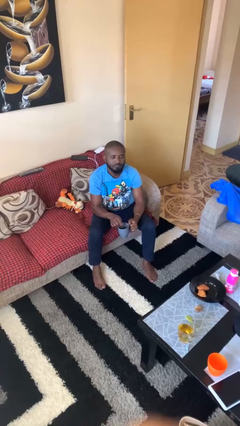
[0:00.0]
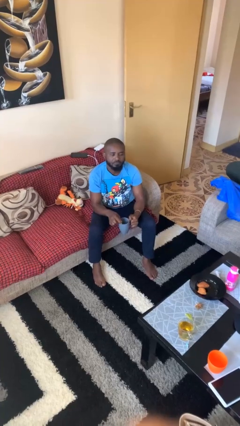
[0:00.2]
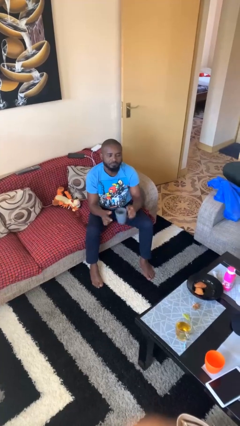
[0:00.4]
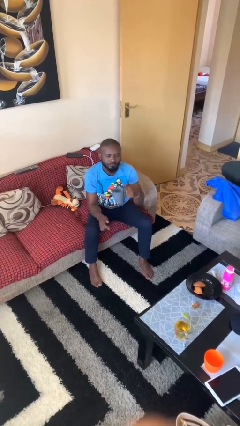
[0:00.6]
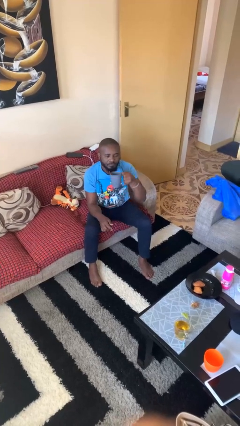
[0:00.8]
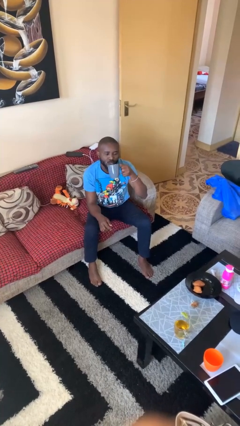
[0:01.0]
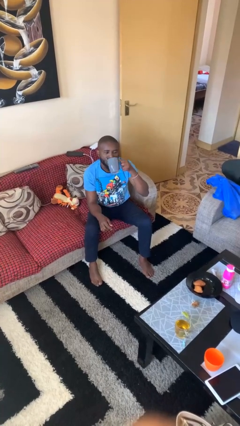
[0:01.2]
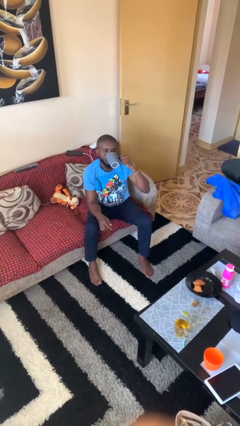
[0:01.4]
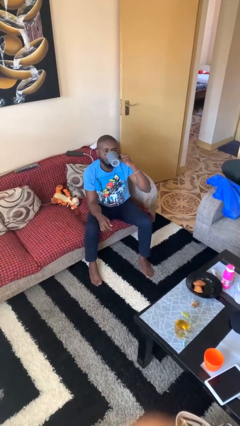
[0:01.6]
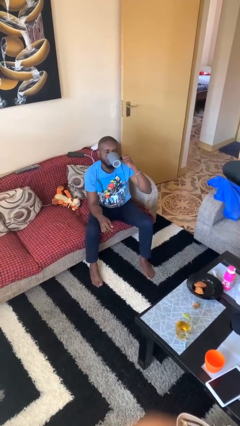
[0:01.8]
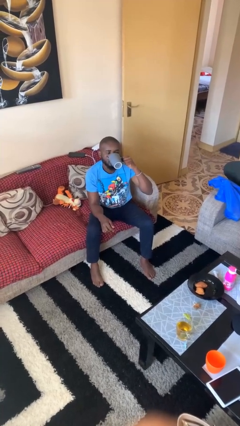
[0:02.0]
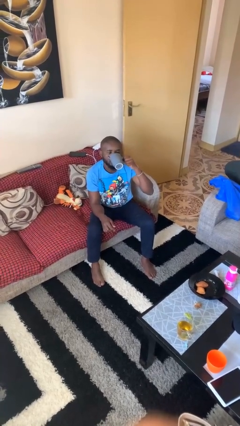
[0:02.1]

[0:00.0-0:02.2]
person drinks from mug

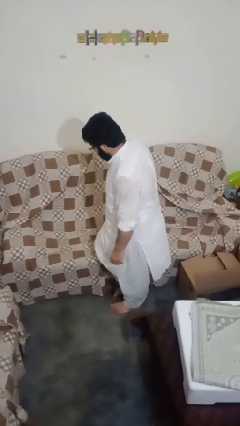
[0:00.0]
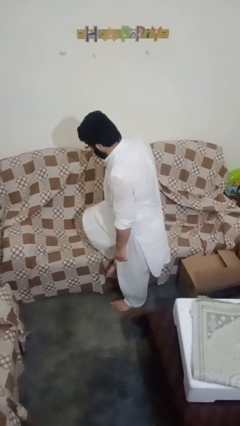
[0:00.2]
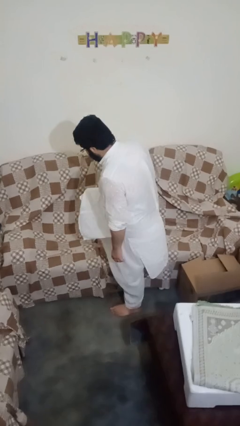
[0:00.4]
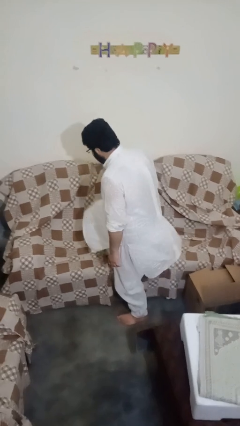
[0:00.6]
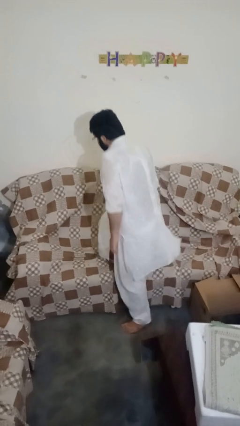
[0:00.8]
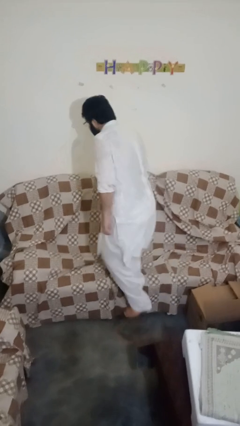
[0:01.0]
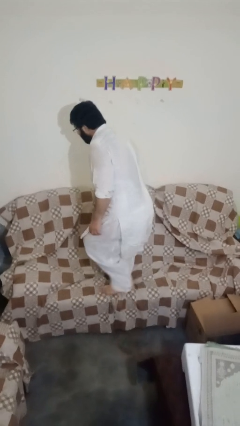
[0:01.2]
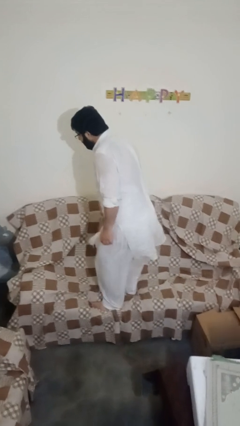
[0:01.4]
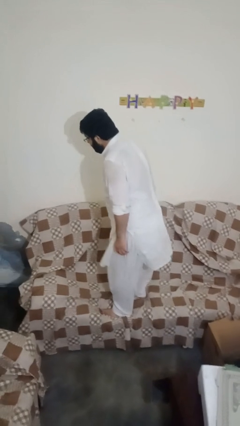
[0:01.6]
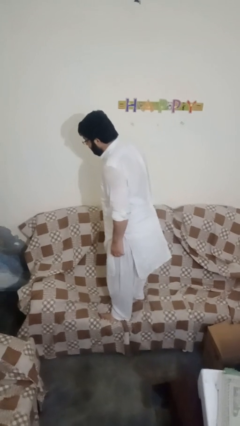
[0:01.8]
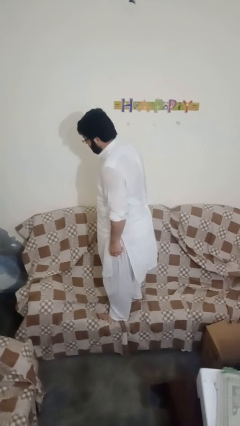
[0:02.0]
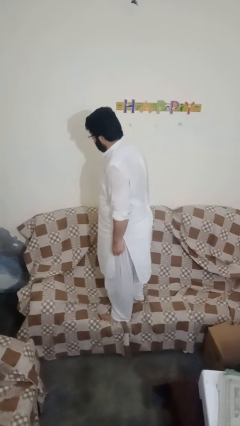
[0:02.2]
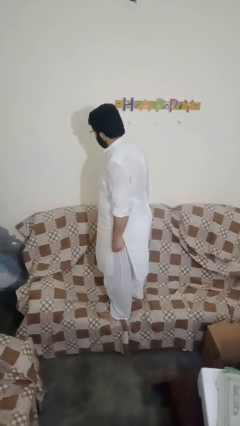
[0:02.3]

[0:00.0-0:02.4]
person climbs on couch

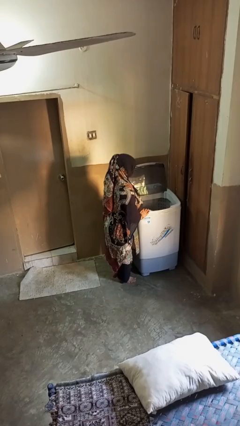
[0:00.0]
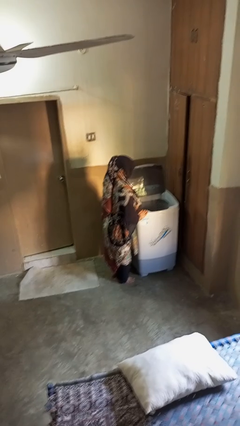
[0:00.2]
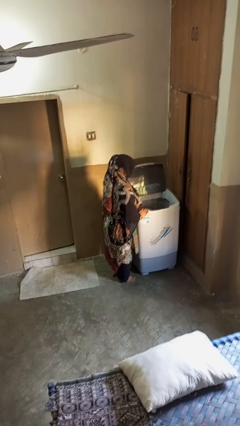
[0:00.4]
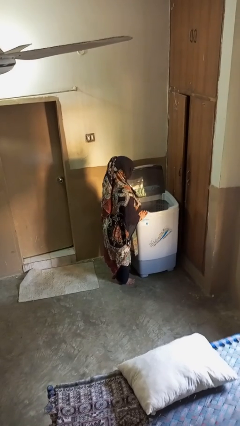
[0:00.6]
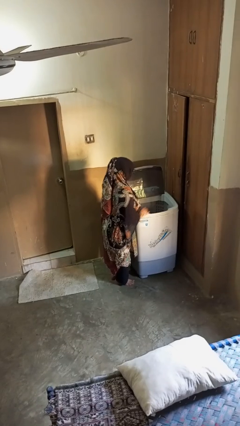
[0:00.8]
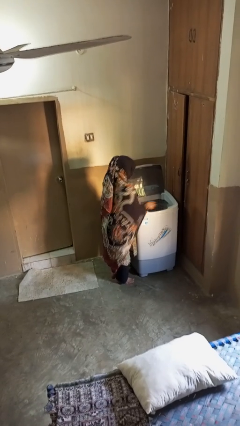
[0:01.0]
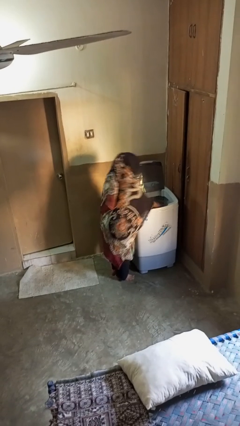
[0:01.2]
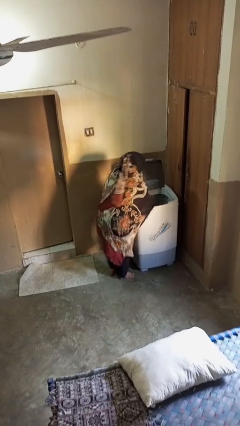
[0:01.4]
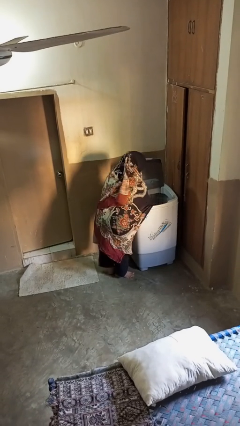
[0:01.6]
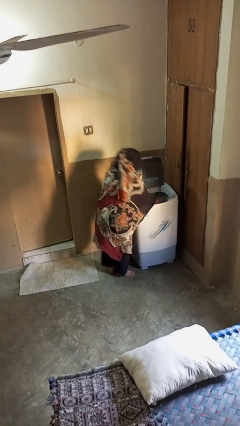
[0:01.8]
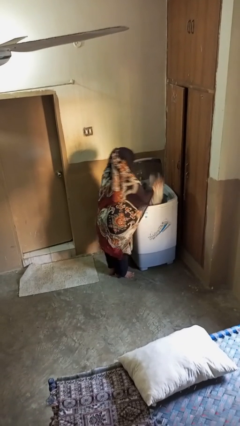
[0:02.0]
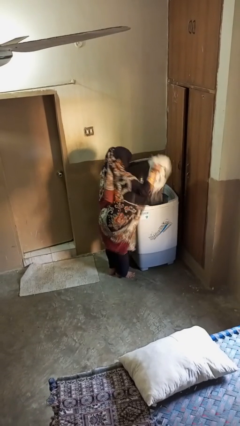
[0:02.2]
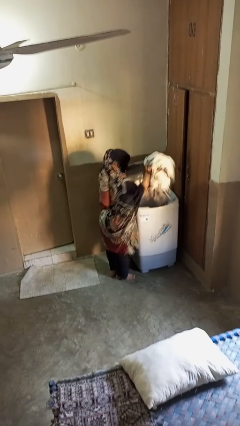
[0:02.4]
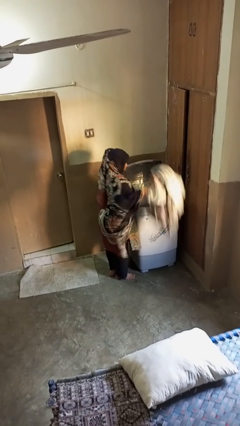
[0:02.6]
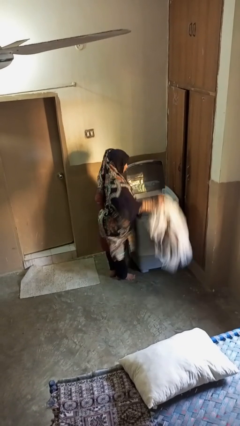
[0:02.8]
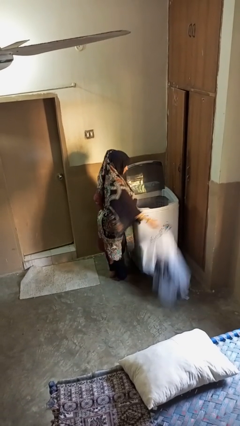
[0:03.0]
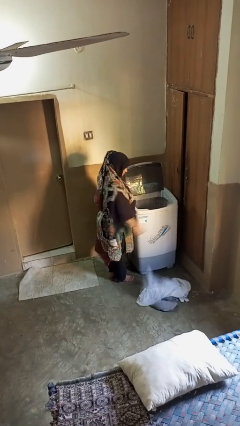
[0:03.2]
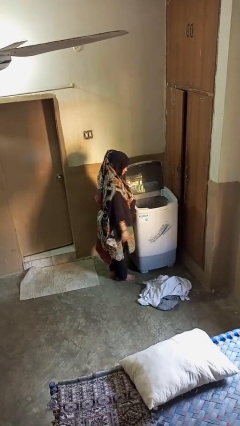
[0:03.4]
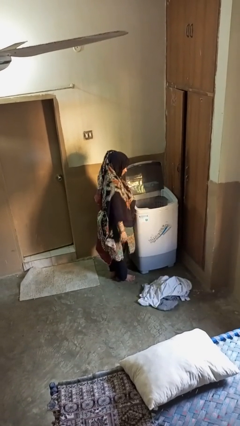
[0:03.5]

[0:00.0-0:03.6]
person unloads clotheswasher

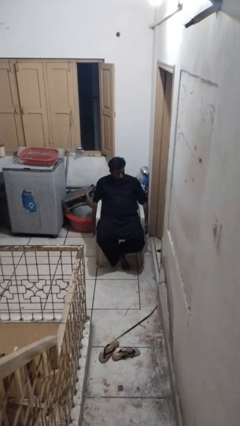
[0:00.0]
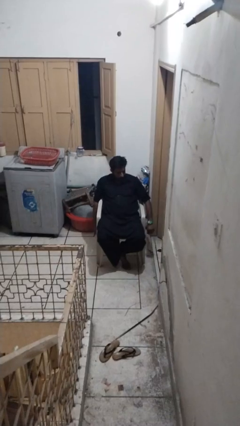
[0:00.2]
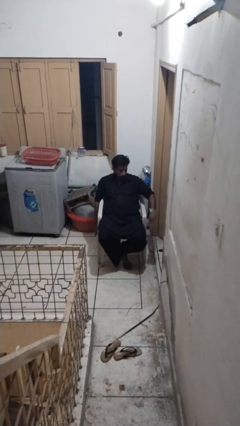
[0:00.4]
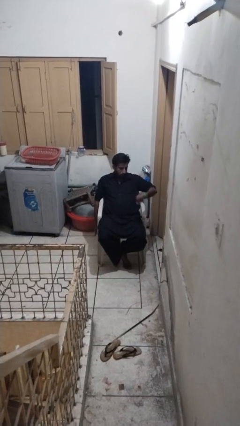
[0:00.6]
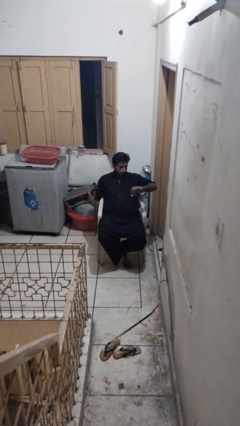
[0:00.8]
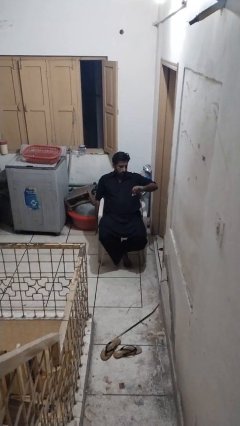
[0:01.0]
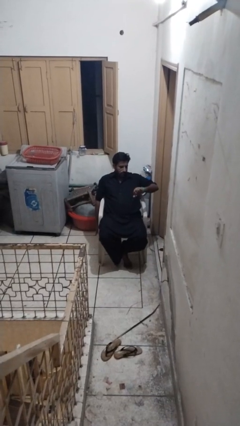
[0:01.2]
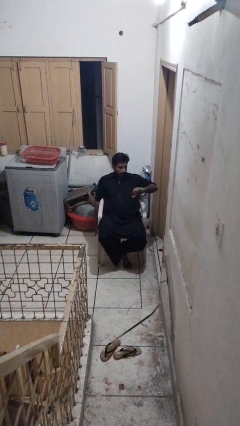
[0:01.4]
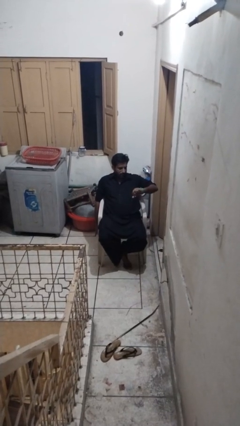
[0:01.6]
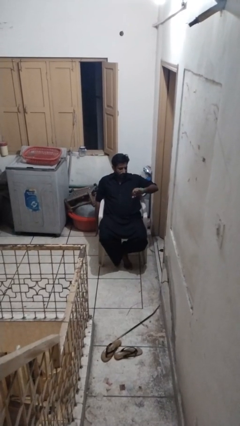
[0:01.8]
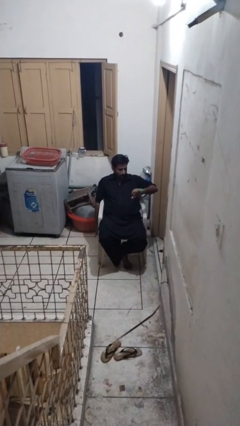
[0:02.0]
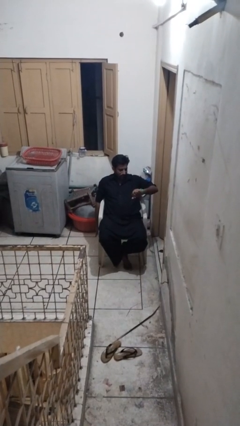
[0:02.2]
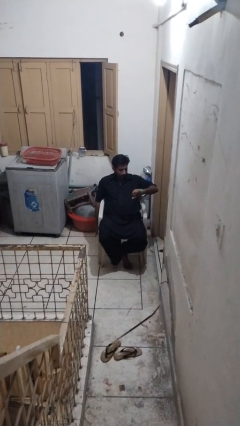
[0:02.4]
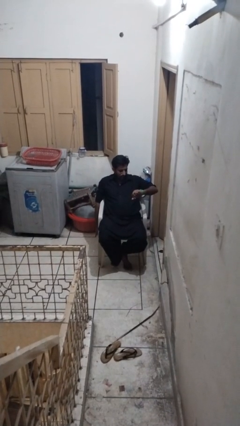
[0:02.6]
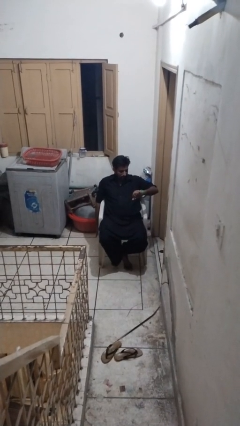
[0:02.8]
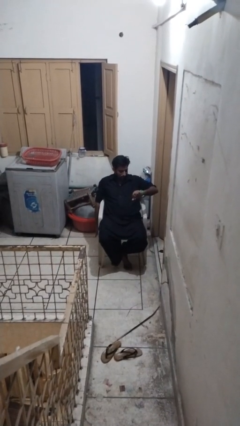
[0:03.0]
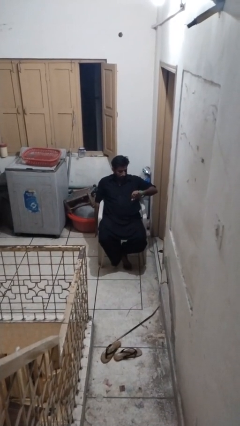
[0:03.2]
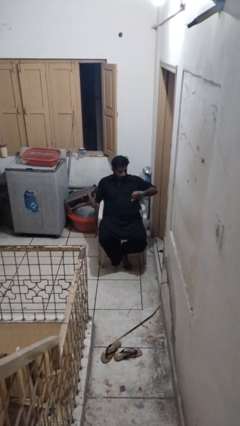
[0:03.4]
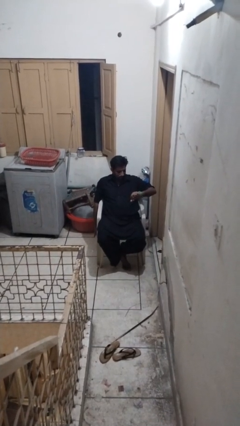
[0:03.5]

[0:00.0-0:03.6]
person looks at wristwatch

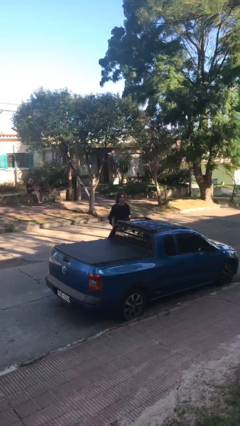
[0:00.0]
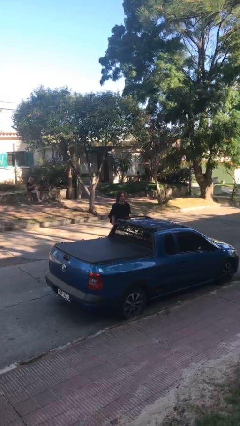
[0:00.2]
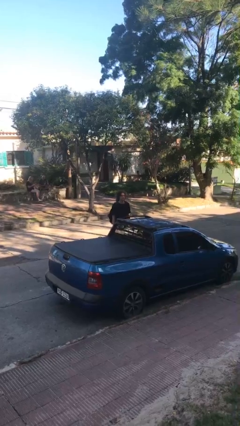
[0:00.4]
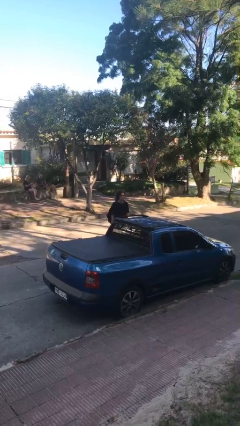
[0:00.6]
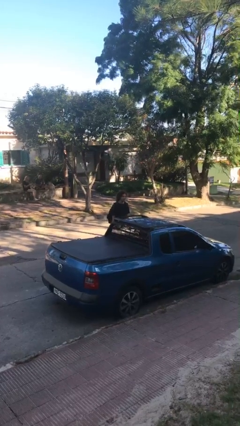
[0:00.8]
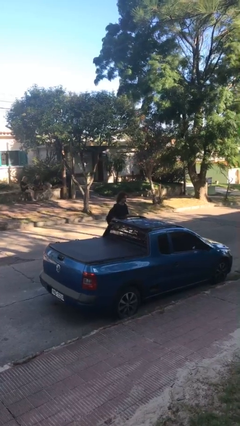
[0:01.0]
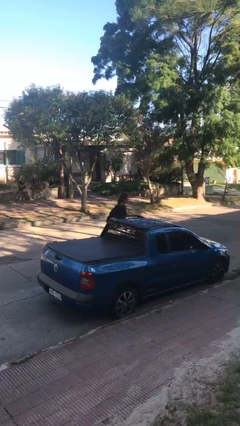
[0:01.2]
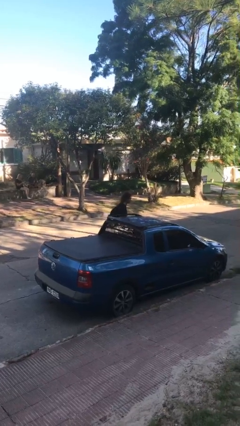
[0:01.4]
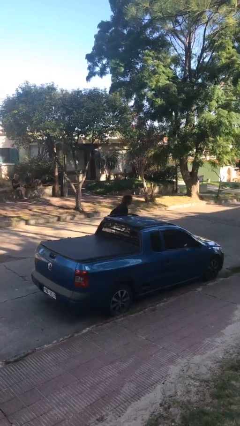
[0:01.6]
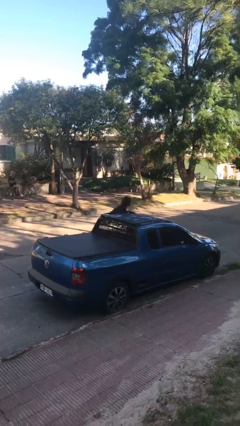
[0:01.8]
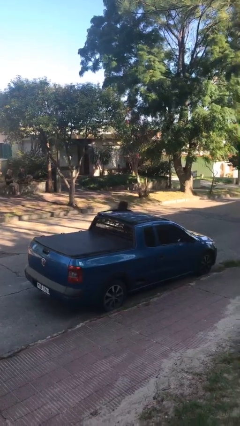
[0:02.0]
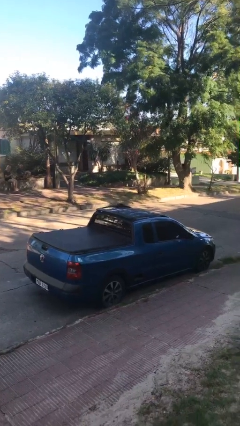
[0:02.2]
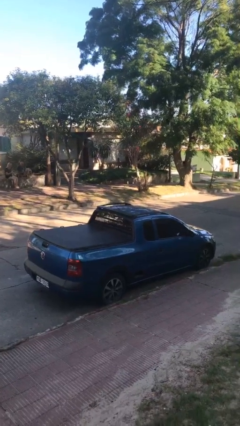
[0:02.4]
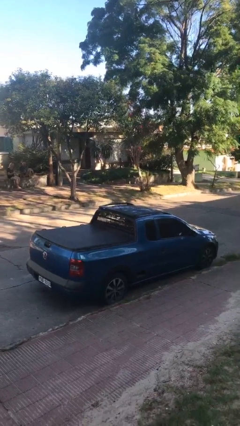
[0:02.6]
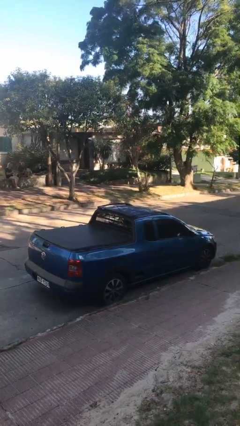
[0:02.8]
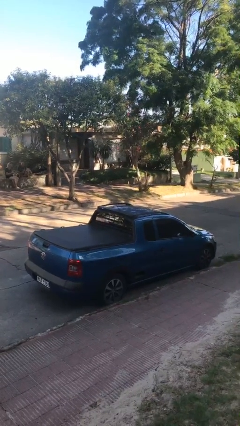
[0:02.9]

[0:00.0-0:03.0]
person enters car

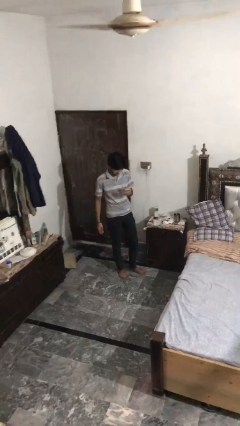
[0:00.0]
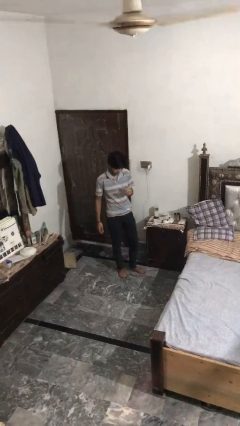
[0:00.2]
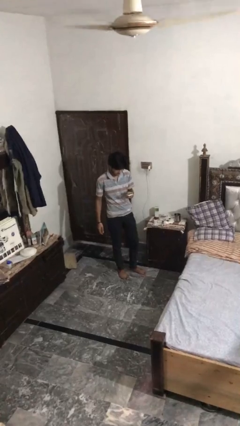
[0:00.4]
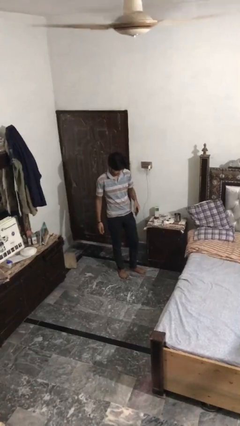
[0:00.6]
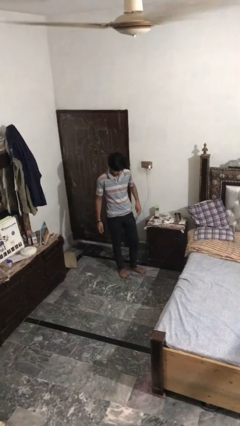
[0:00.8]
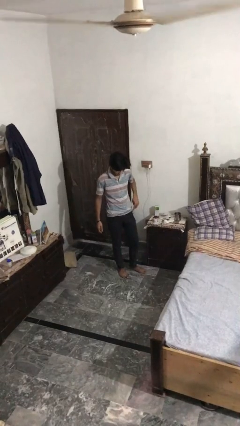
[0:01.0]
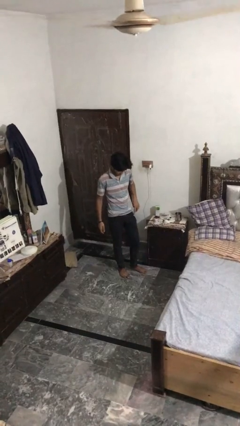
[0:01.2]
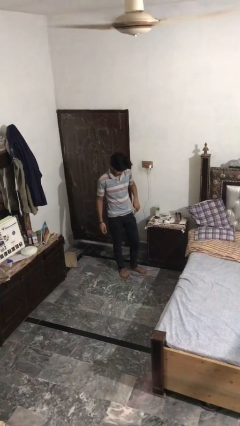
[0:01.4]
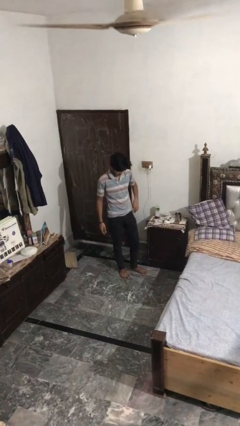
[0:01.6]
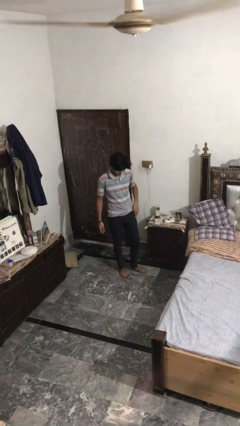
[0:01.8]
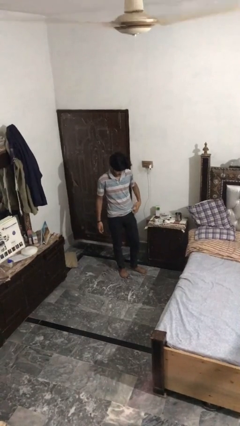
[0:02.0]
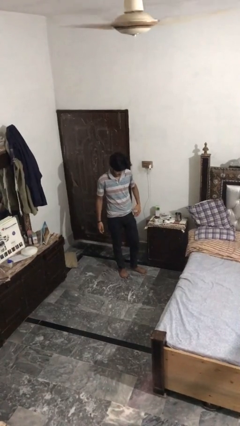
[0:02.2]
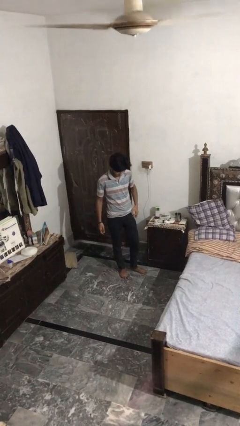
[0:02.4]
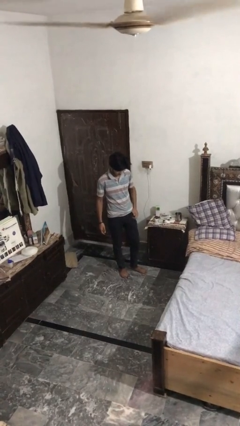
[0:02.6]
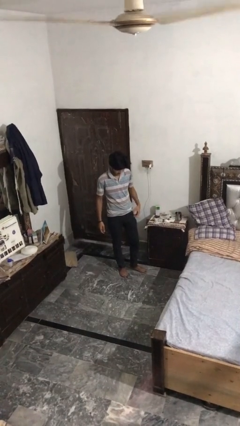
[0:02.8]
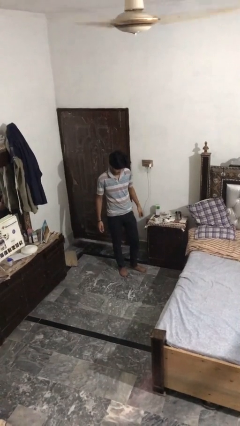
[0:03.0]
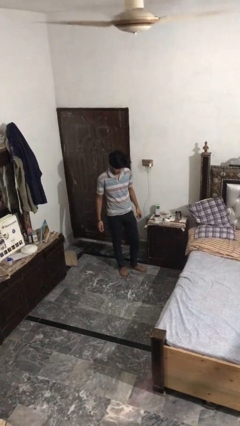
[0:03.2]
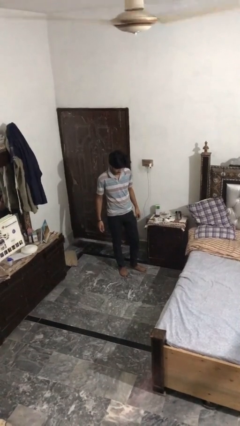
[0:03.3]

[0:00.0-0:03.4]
person puts phone into pocket
